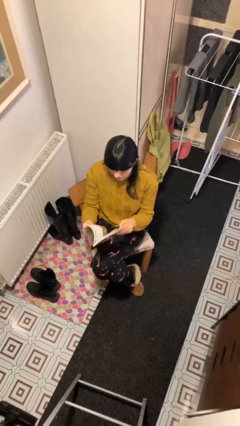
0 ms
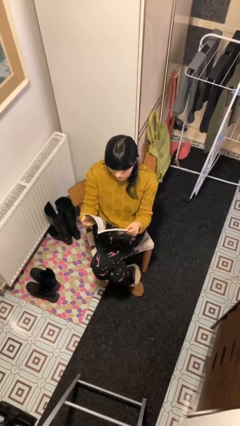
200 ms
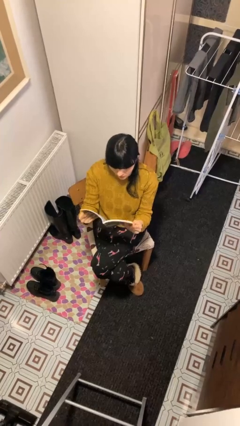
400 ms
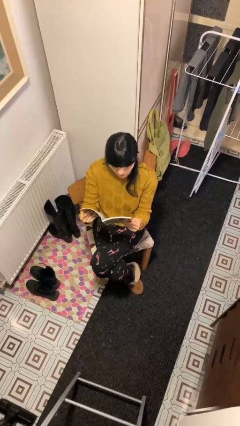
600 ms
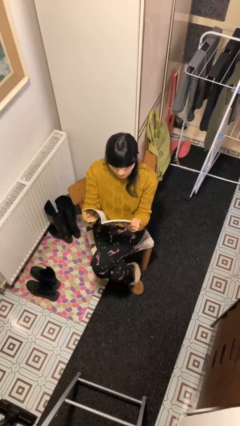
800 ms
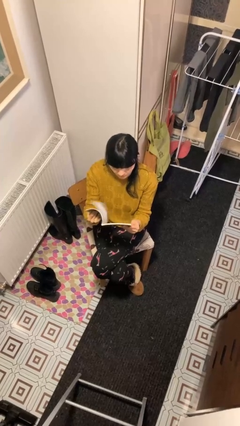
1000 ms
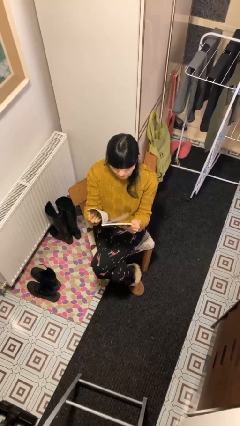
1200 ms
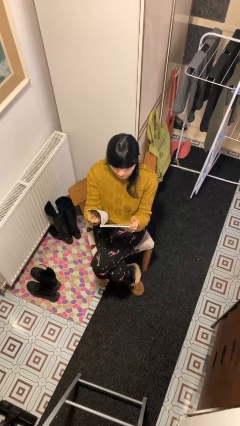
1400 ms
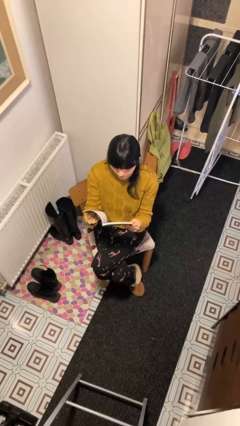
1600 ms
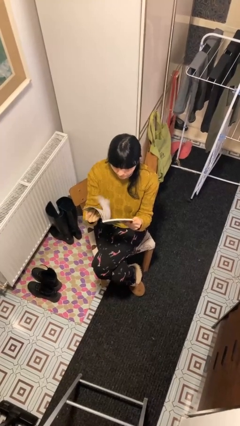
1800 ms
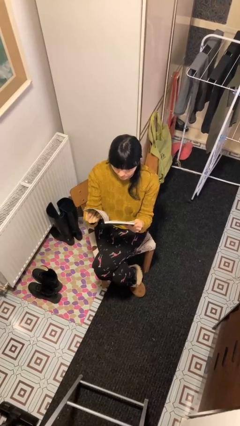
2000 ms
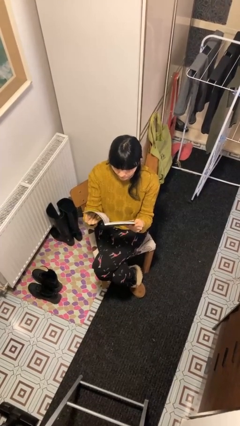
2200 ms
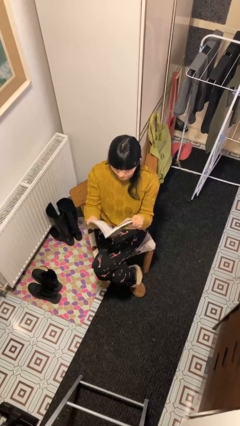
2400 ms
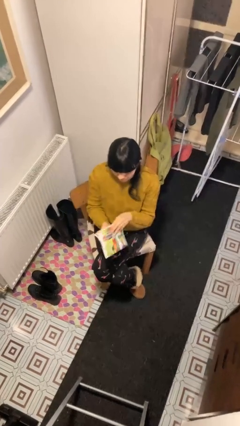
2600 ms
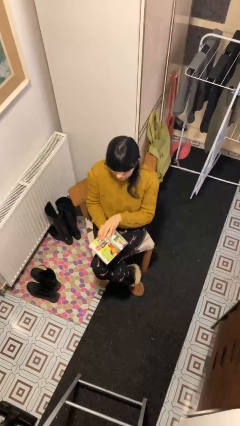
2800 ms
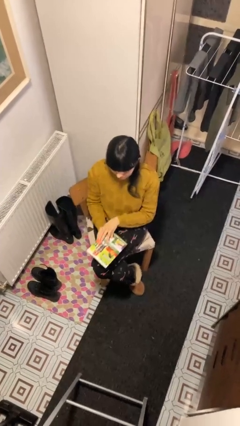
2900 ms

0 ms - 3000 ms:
person reads document

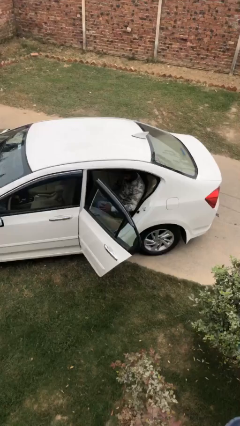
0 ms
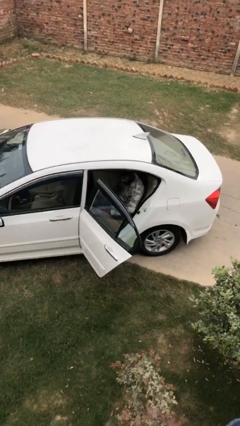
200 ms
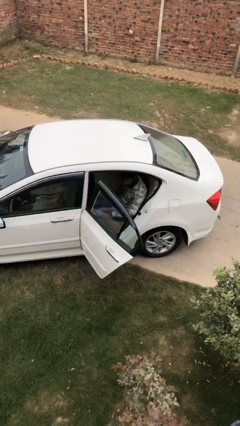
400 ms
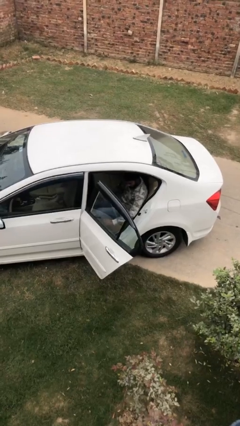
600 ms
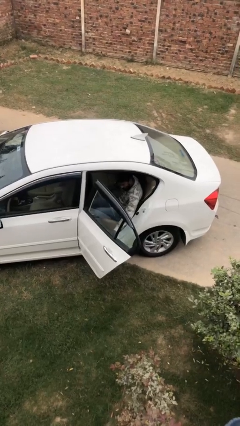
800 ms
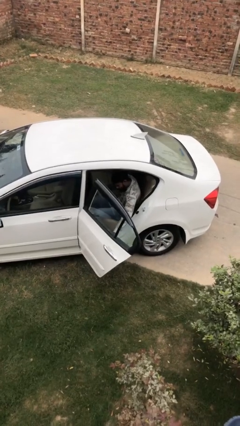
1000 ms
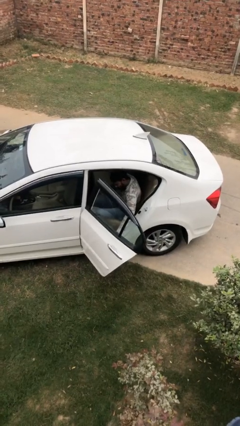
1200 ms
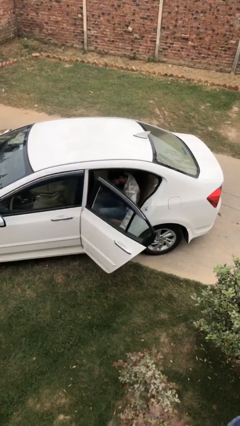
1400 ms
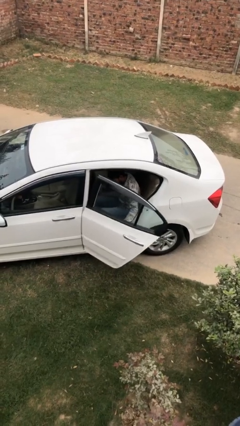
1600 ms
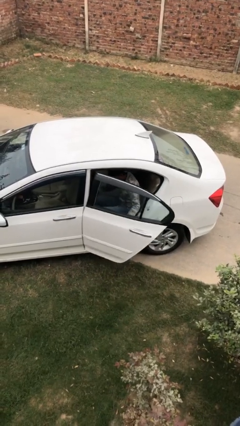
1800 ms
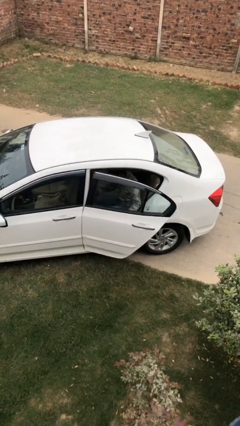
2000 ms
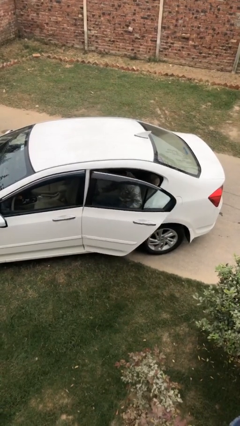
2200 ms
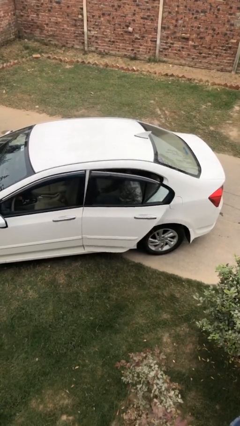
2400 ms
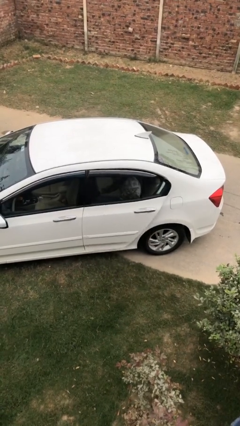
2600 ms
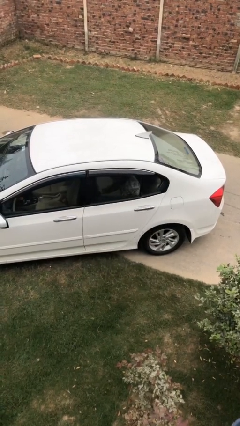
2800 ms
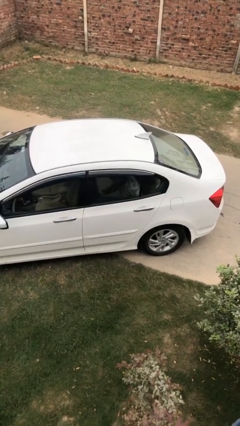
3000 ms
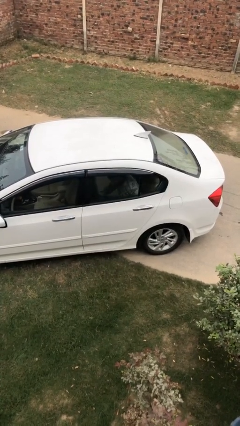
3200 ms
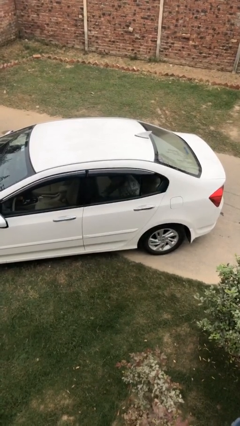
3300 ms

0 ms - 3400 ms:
person closes car door

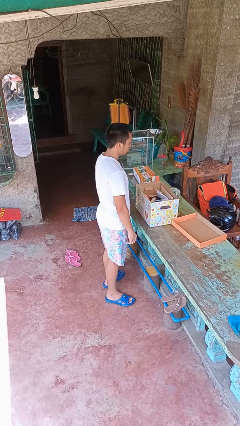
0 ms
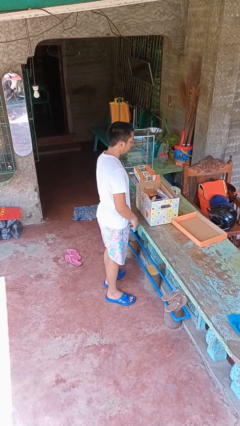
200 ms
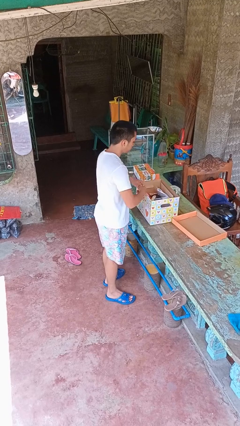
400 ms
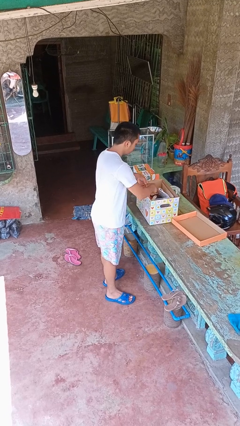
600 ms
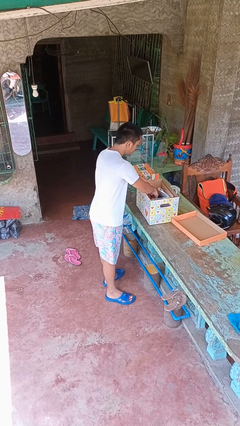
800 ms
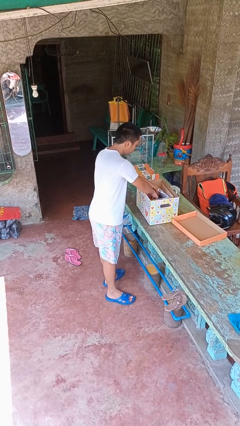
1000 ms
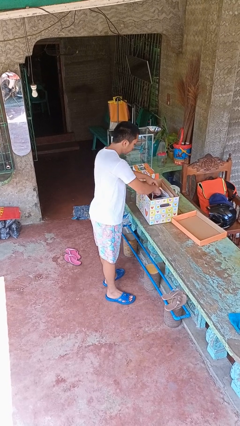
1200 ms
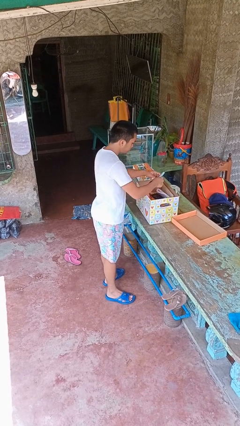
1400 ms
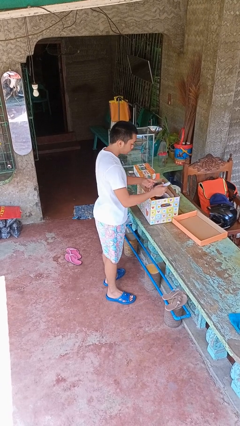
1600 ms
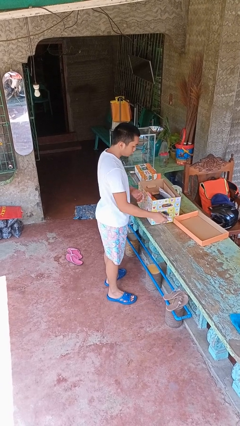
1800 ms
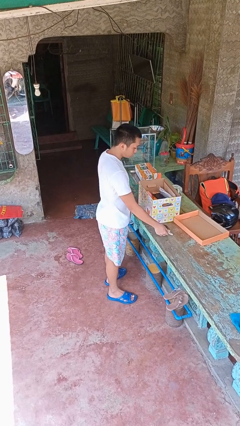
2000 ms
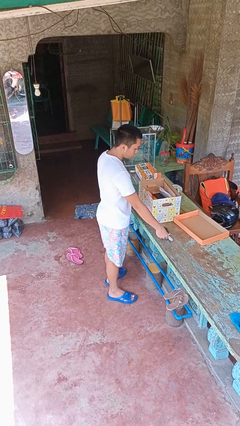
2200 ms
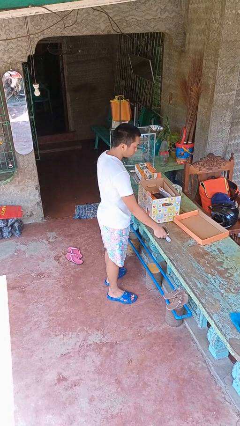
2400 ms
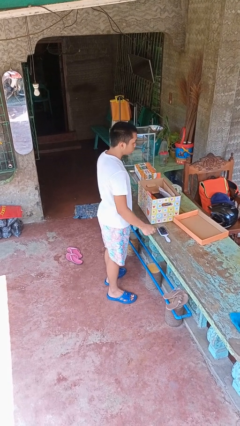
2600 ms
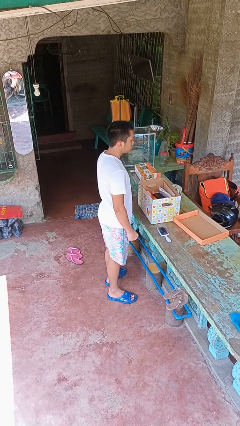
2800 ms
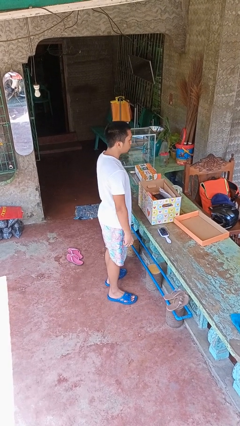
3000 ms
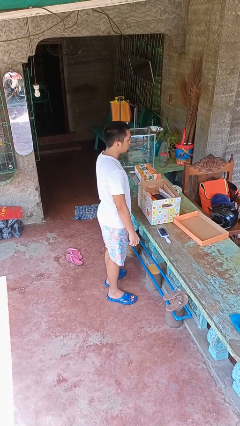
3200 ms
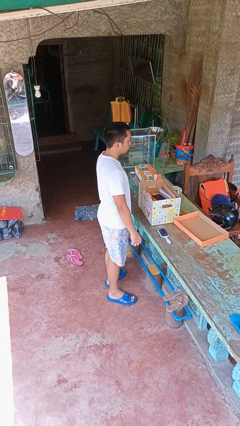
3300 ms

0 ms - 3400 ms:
person takes object from box

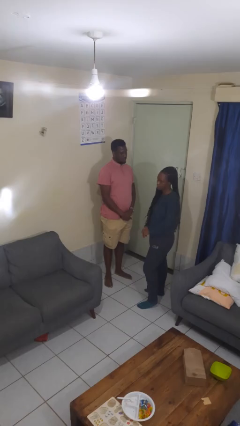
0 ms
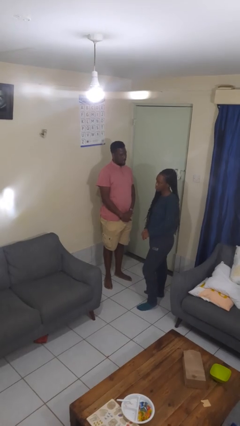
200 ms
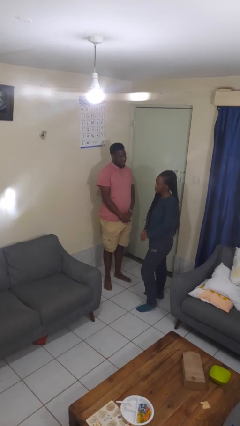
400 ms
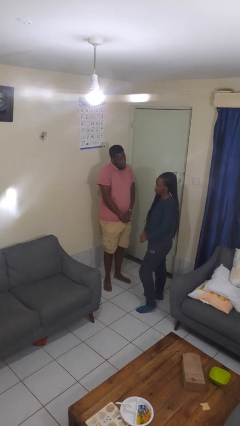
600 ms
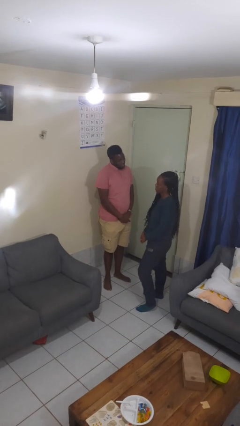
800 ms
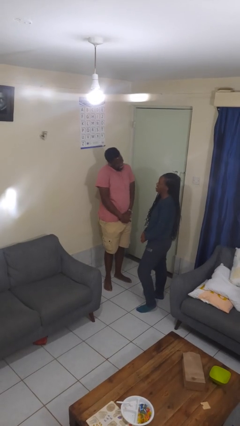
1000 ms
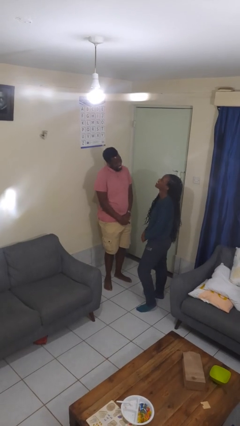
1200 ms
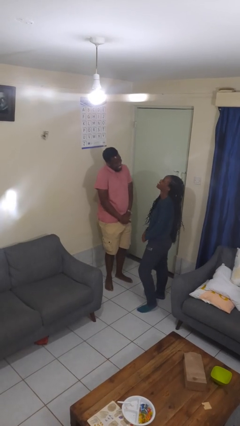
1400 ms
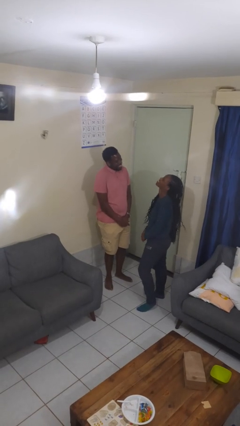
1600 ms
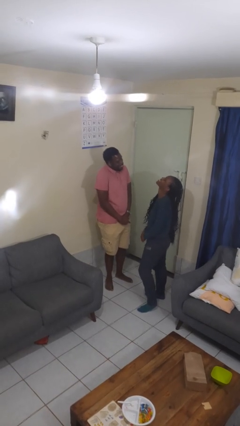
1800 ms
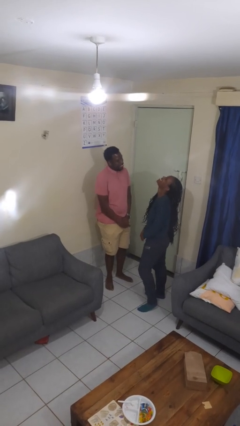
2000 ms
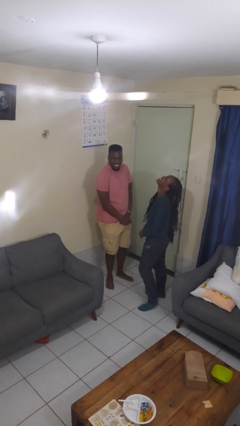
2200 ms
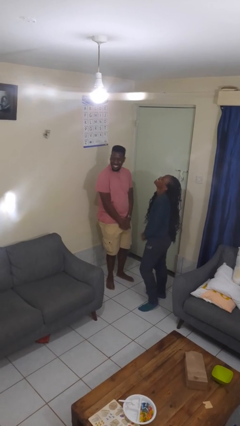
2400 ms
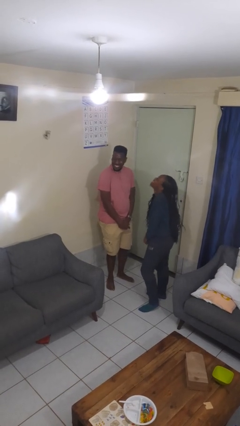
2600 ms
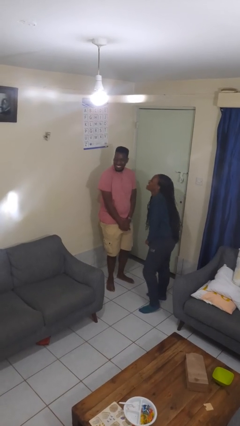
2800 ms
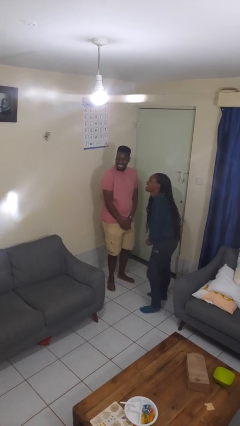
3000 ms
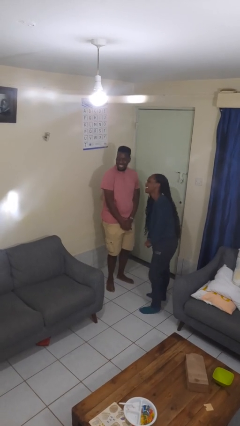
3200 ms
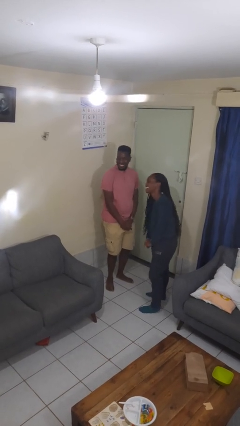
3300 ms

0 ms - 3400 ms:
person laughs with person

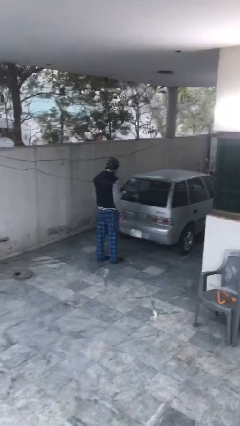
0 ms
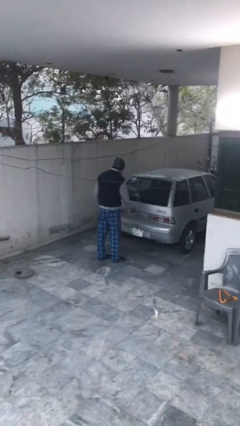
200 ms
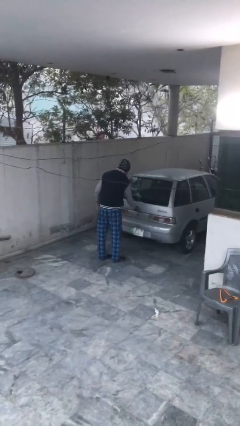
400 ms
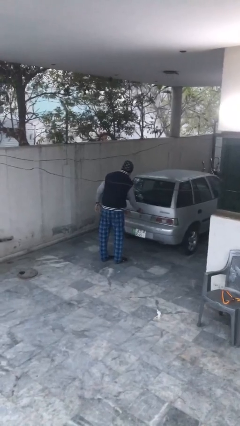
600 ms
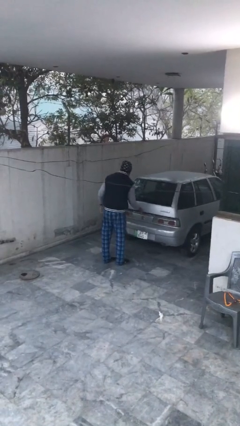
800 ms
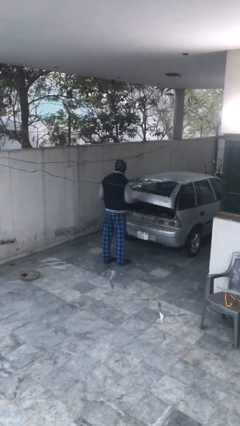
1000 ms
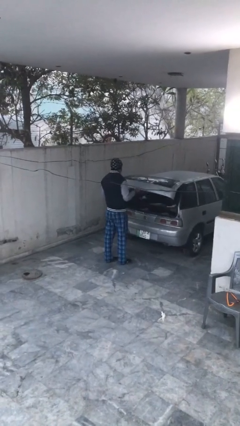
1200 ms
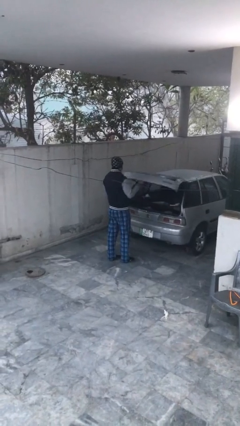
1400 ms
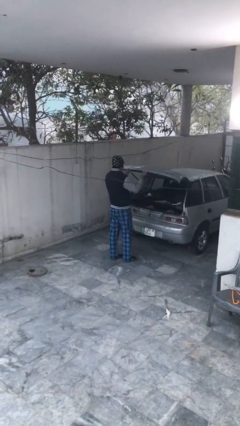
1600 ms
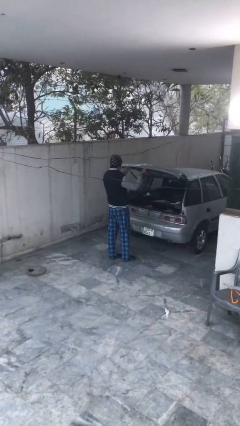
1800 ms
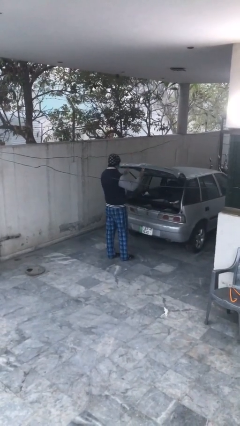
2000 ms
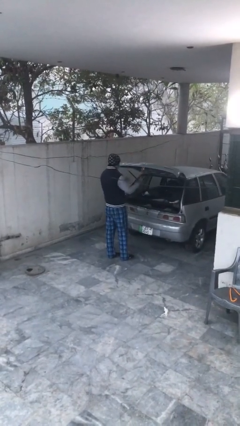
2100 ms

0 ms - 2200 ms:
person opens car trunk

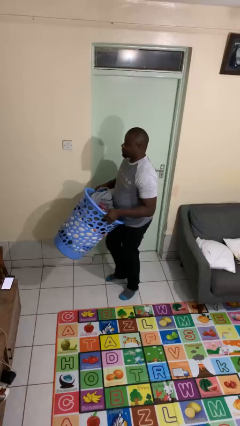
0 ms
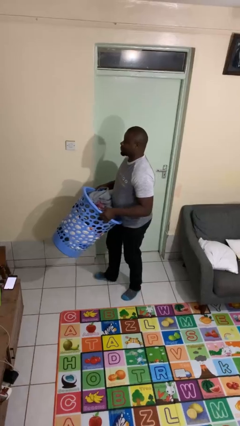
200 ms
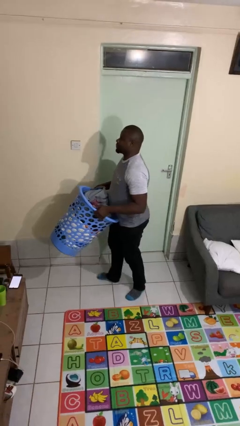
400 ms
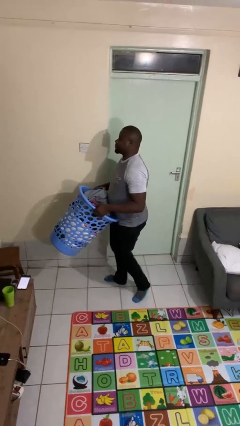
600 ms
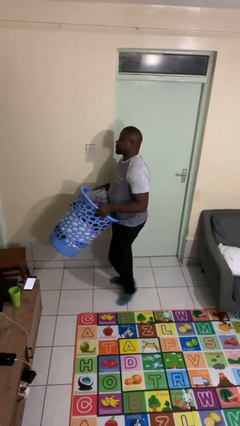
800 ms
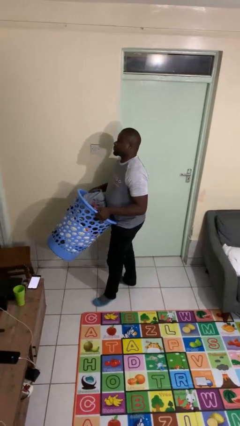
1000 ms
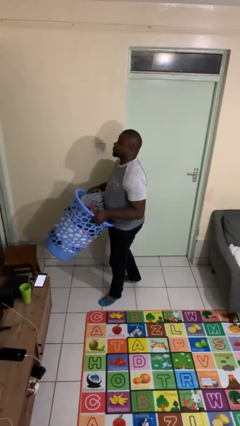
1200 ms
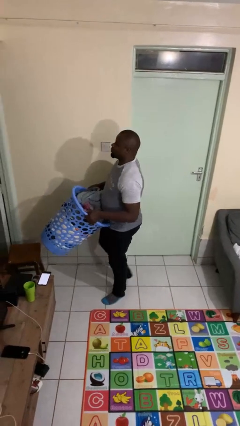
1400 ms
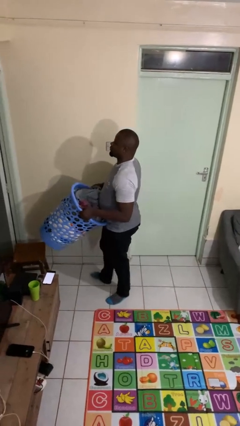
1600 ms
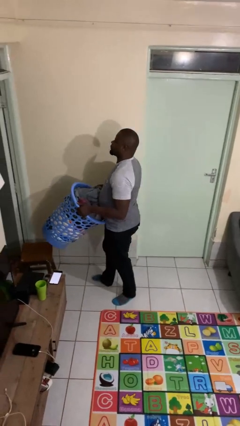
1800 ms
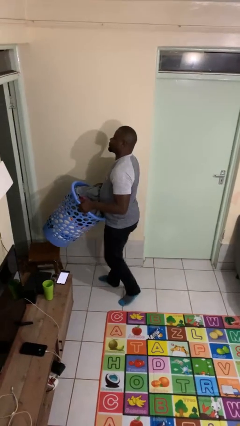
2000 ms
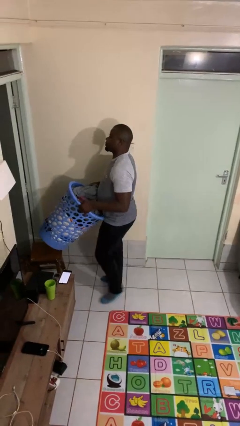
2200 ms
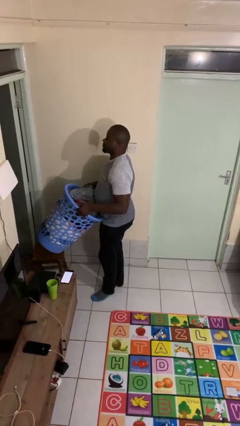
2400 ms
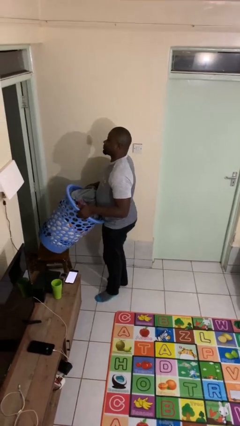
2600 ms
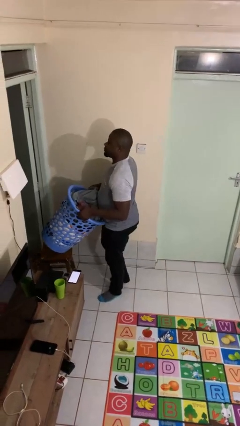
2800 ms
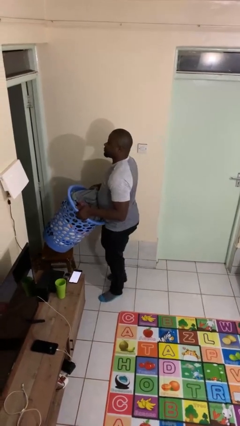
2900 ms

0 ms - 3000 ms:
person carries laundry basket
